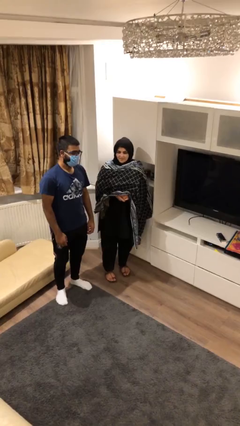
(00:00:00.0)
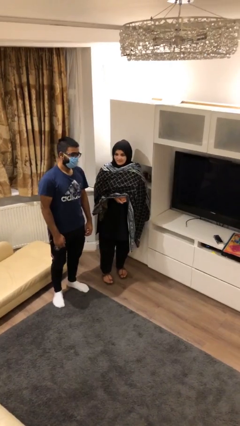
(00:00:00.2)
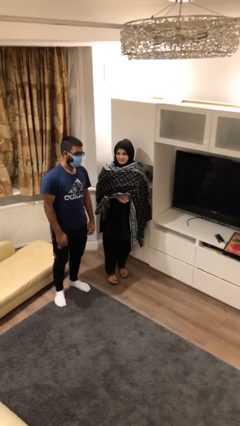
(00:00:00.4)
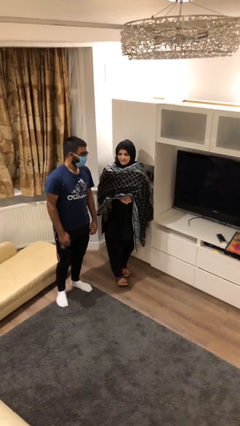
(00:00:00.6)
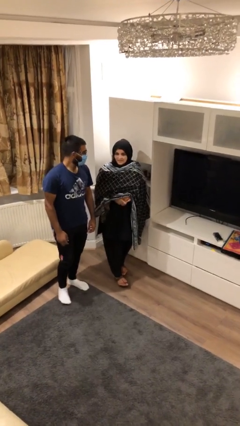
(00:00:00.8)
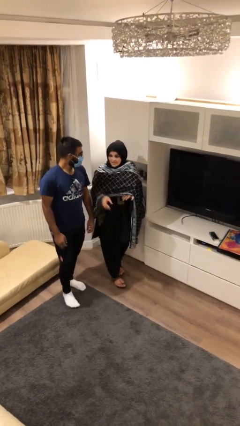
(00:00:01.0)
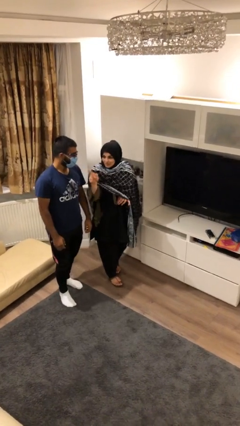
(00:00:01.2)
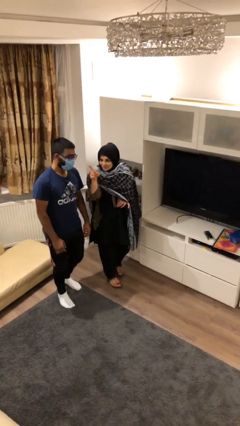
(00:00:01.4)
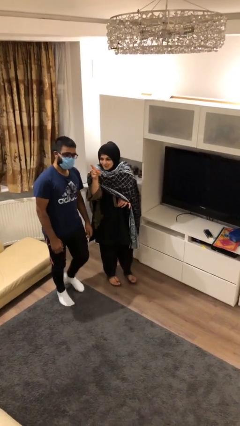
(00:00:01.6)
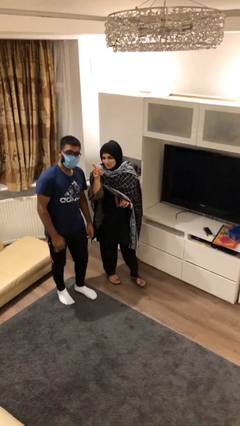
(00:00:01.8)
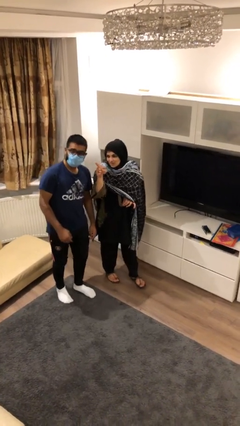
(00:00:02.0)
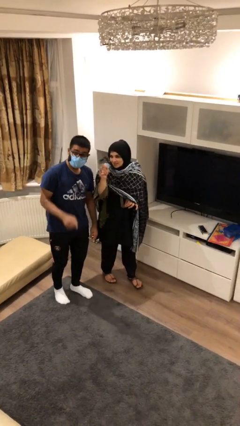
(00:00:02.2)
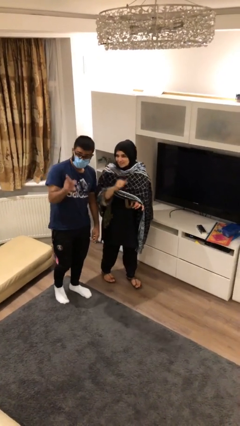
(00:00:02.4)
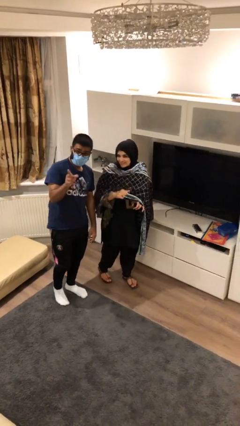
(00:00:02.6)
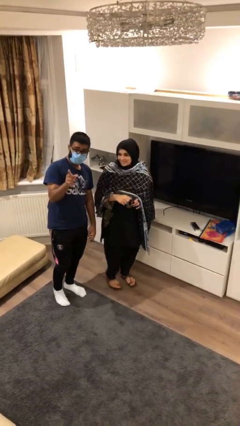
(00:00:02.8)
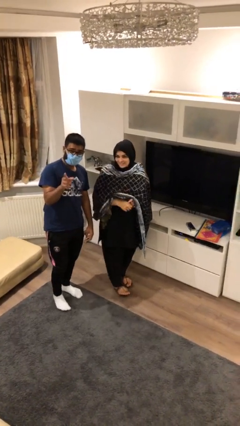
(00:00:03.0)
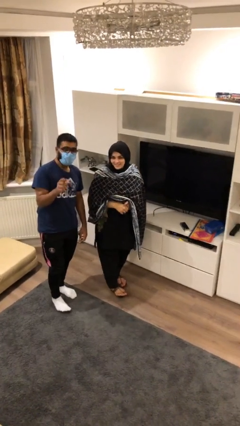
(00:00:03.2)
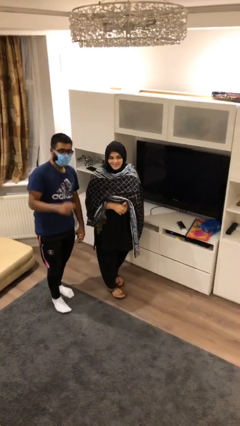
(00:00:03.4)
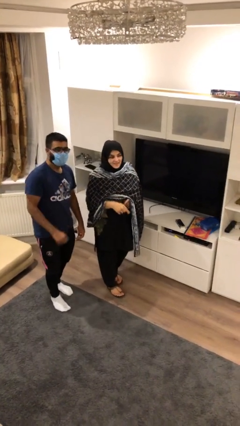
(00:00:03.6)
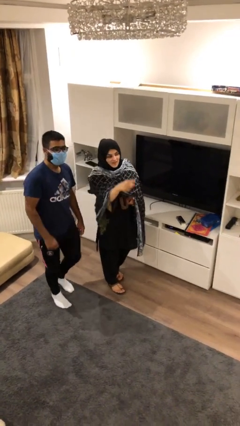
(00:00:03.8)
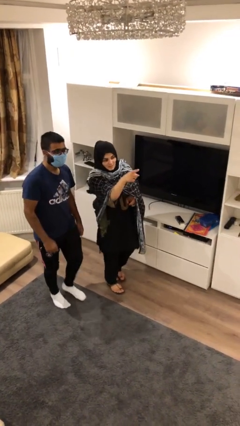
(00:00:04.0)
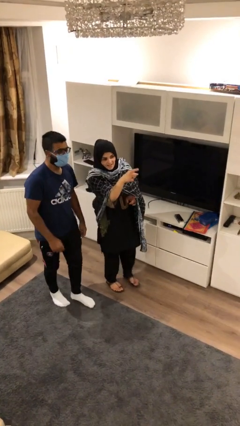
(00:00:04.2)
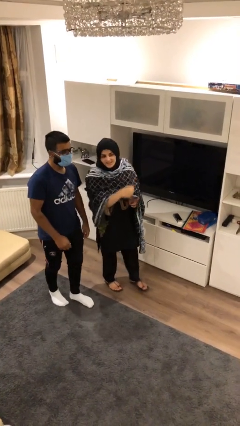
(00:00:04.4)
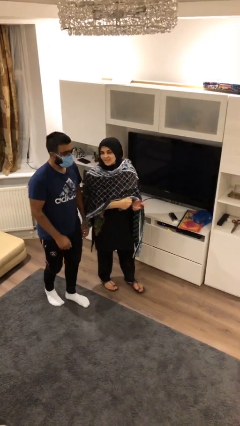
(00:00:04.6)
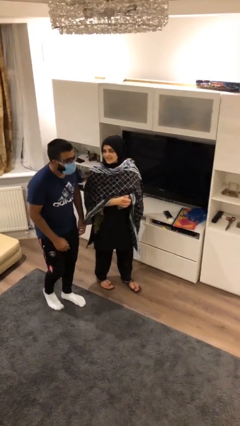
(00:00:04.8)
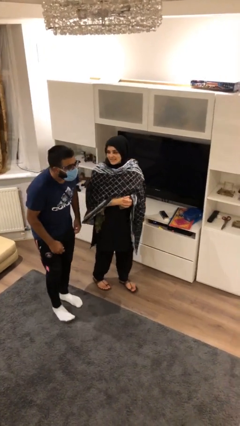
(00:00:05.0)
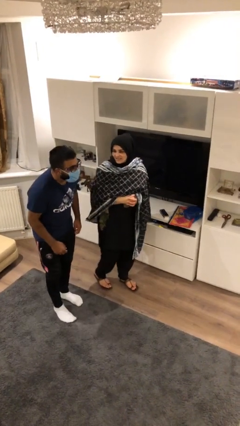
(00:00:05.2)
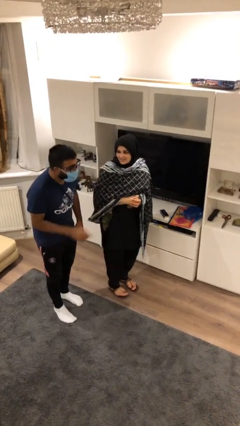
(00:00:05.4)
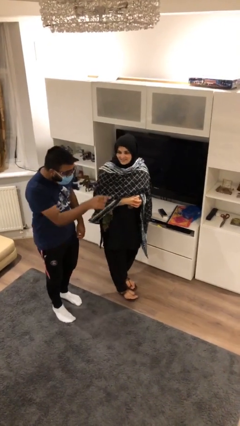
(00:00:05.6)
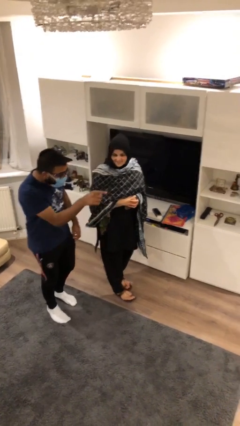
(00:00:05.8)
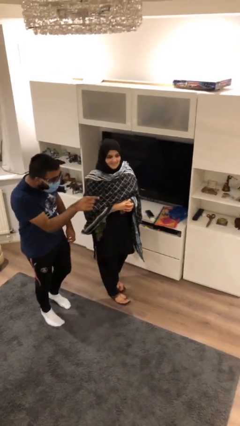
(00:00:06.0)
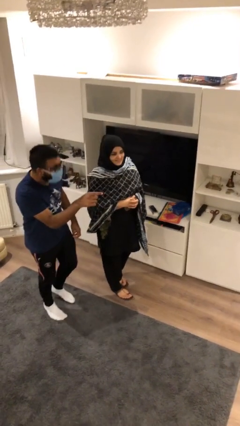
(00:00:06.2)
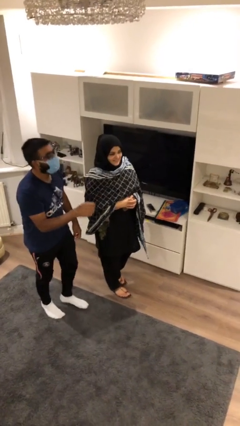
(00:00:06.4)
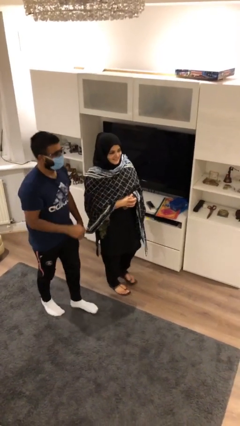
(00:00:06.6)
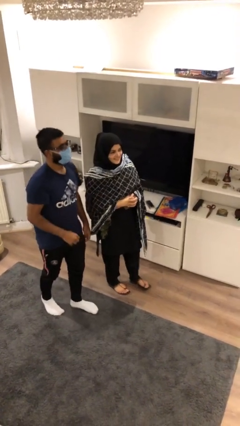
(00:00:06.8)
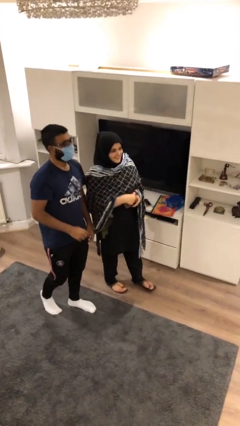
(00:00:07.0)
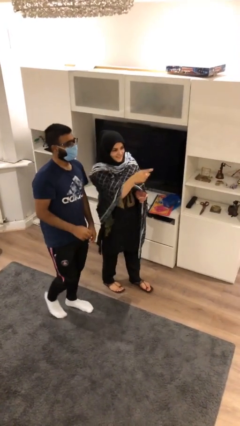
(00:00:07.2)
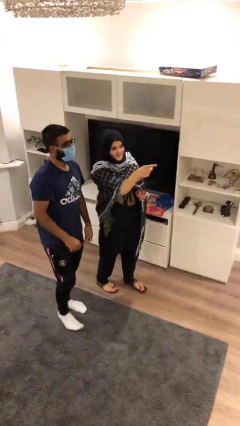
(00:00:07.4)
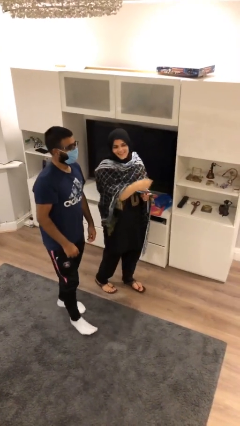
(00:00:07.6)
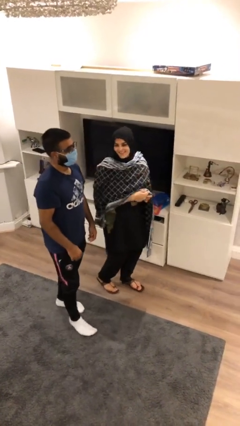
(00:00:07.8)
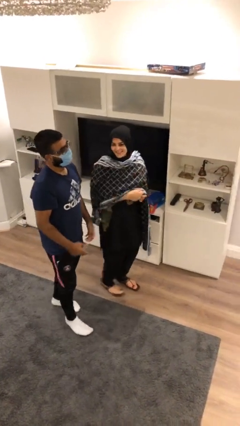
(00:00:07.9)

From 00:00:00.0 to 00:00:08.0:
person talks to person

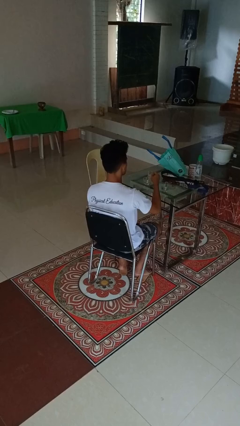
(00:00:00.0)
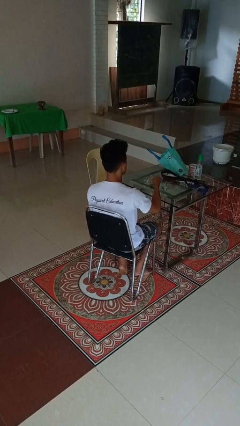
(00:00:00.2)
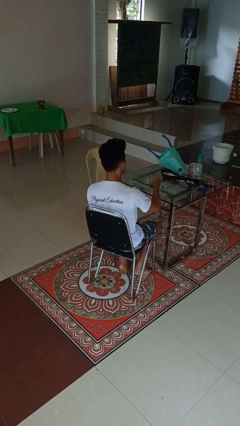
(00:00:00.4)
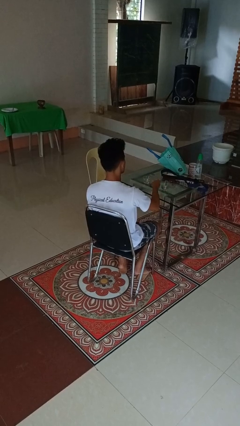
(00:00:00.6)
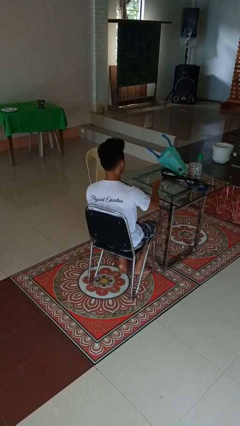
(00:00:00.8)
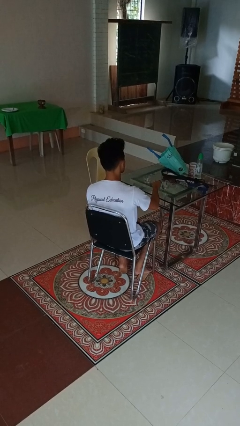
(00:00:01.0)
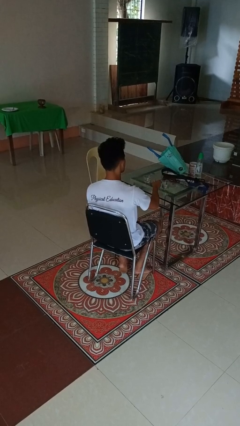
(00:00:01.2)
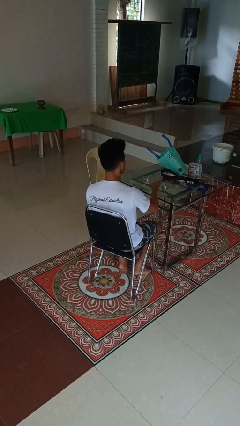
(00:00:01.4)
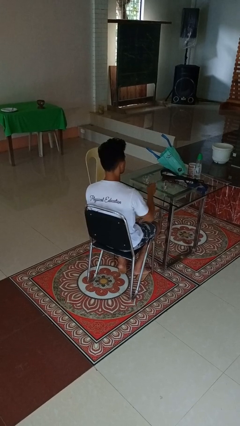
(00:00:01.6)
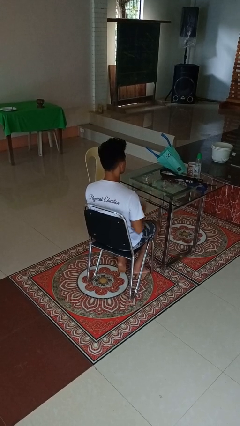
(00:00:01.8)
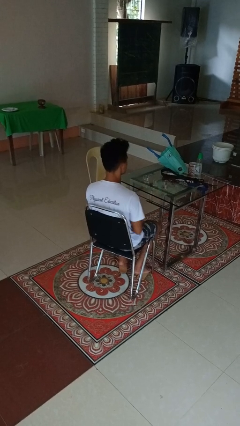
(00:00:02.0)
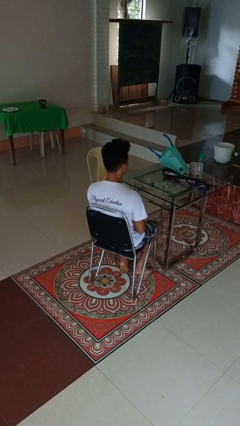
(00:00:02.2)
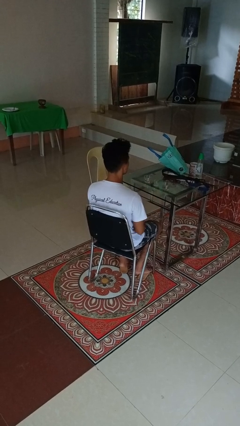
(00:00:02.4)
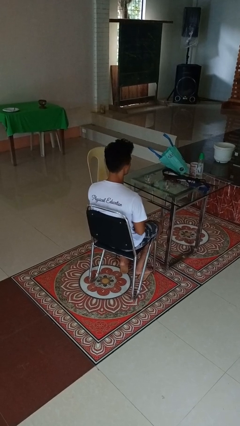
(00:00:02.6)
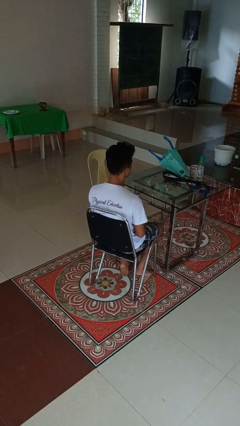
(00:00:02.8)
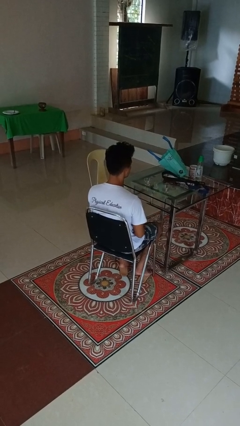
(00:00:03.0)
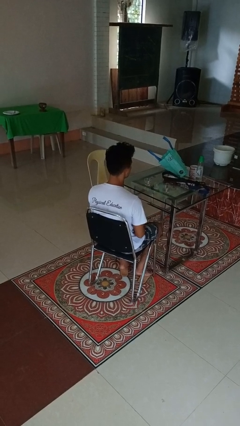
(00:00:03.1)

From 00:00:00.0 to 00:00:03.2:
person puts down object on table

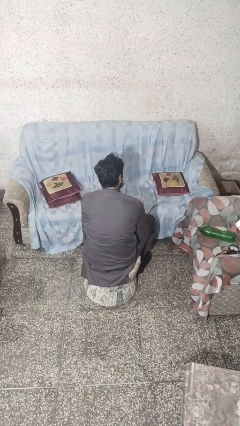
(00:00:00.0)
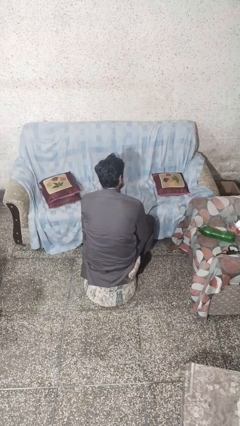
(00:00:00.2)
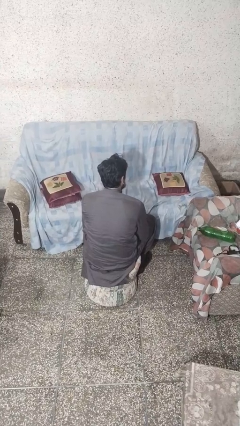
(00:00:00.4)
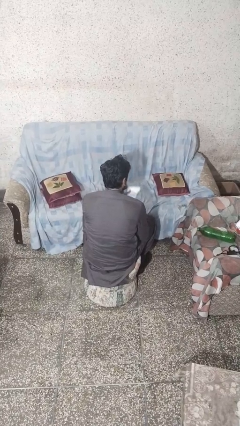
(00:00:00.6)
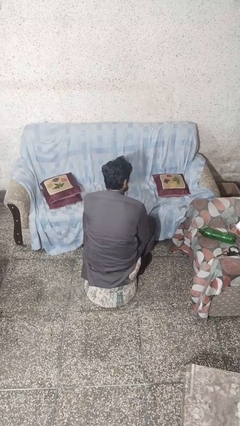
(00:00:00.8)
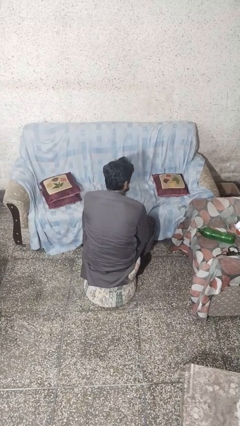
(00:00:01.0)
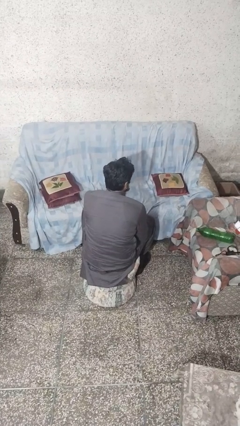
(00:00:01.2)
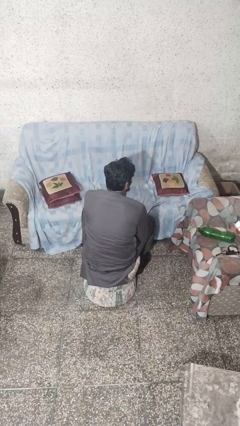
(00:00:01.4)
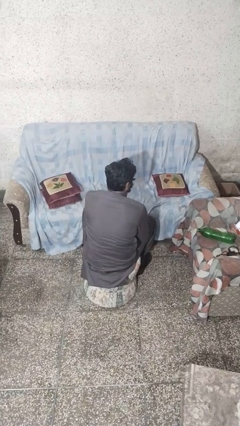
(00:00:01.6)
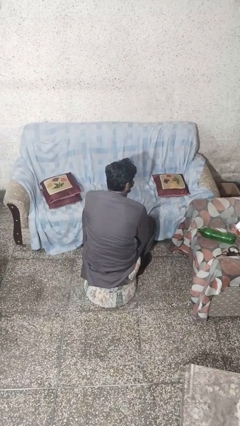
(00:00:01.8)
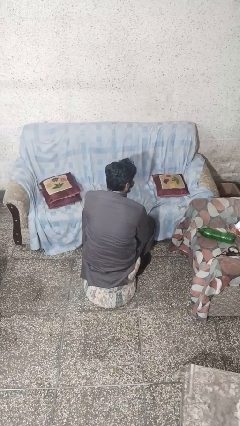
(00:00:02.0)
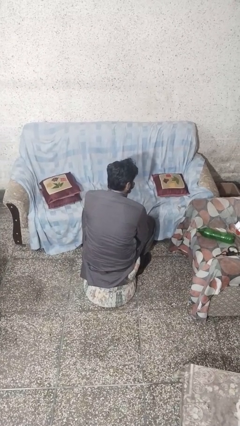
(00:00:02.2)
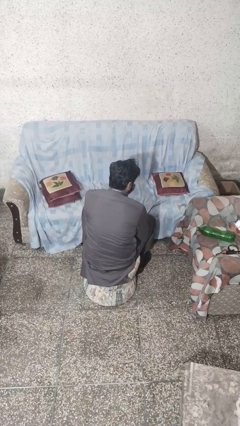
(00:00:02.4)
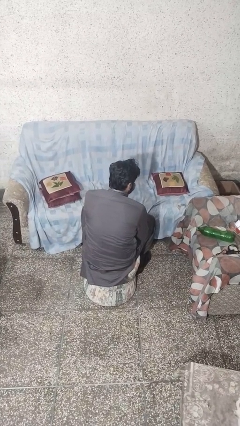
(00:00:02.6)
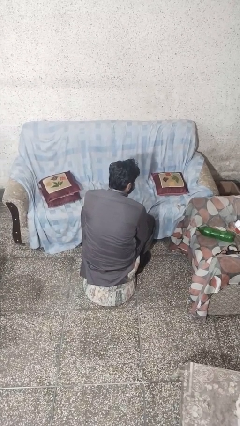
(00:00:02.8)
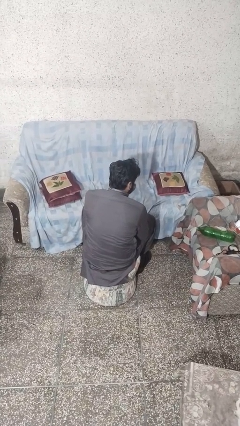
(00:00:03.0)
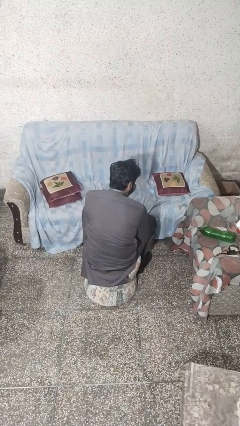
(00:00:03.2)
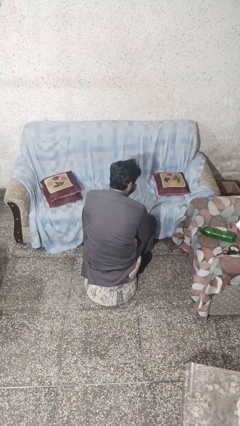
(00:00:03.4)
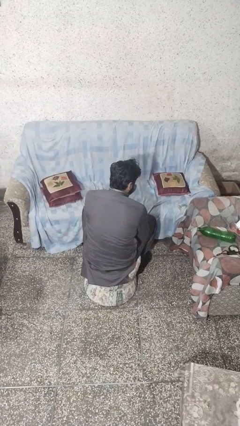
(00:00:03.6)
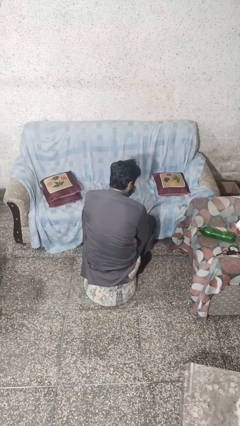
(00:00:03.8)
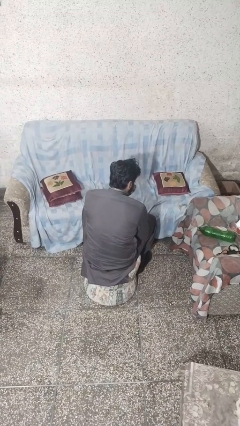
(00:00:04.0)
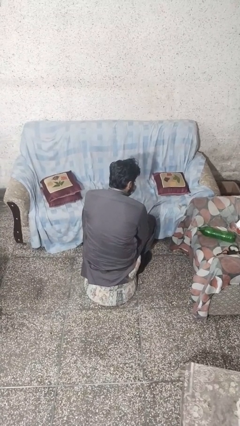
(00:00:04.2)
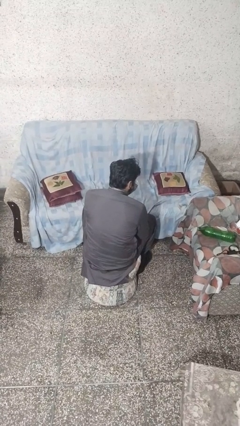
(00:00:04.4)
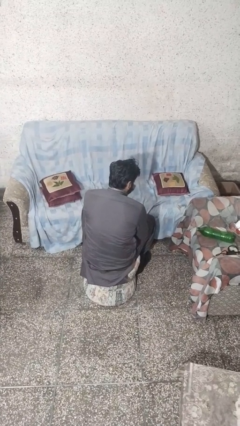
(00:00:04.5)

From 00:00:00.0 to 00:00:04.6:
person blows nose

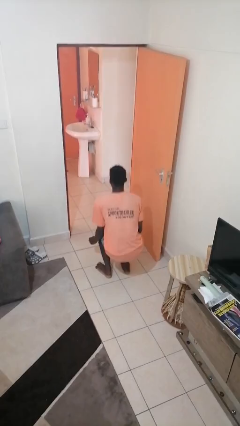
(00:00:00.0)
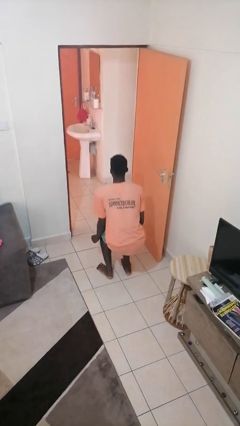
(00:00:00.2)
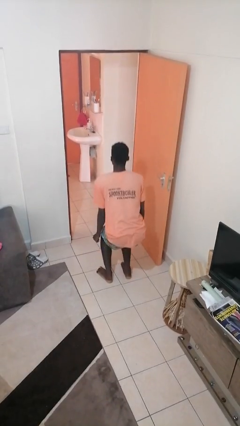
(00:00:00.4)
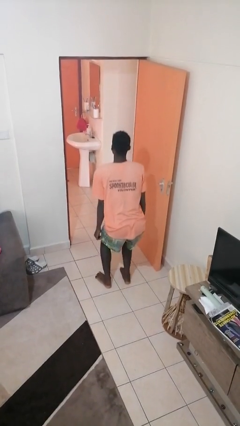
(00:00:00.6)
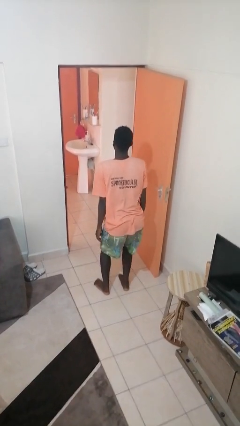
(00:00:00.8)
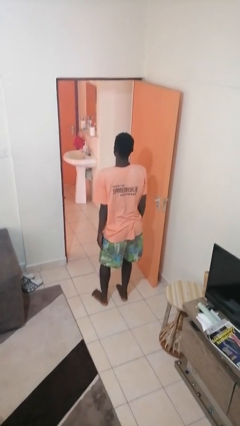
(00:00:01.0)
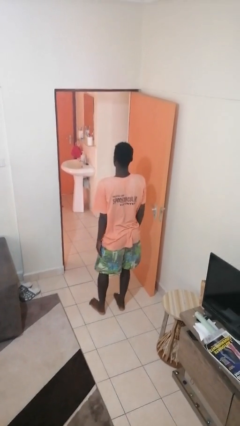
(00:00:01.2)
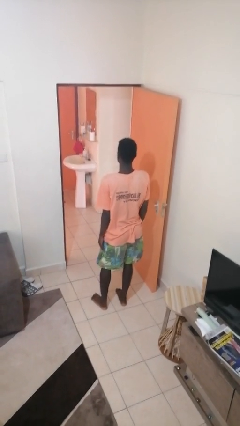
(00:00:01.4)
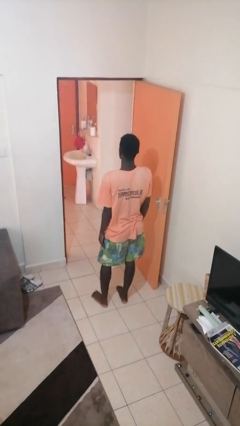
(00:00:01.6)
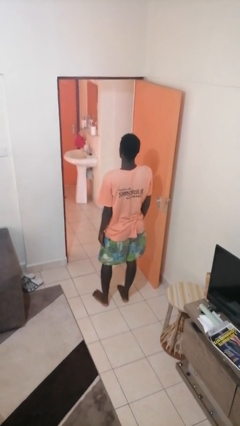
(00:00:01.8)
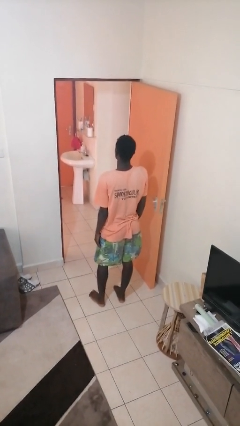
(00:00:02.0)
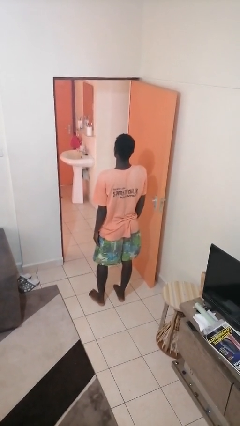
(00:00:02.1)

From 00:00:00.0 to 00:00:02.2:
person stands up
